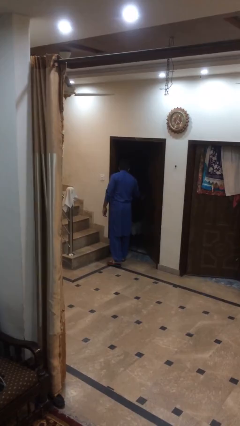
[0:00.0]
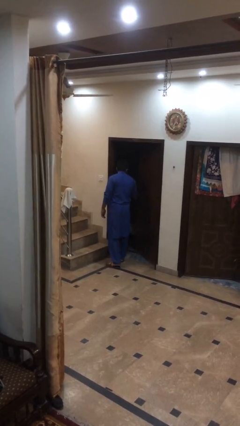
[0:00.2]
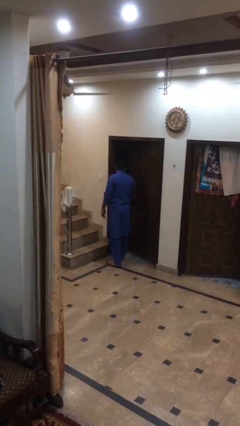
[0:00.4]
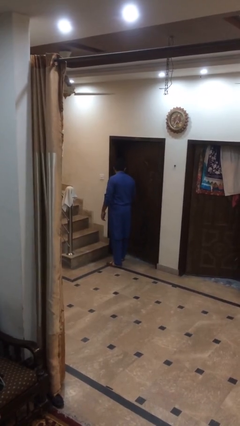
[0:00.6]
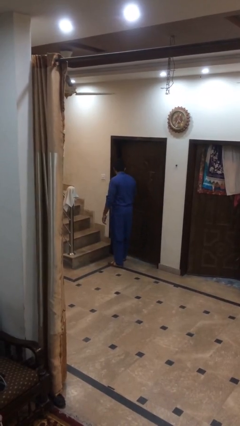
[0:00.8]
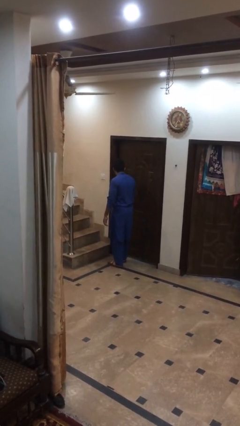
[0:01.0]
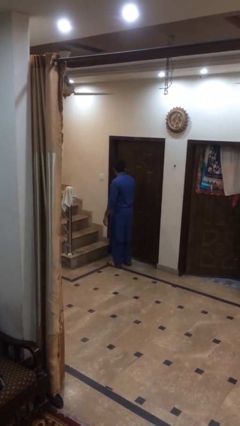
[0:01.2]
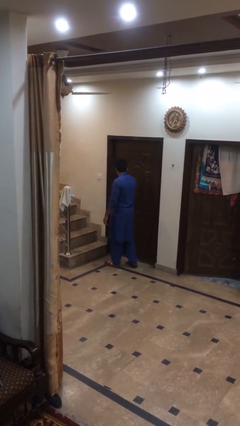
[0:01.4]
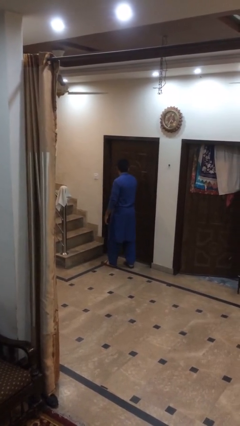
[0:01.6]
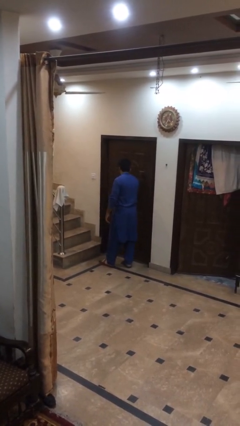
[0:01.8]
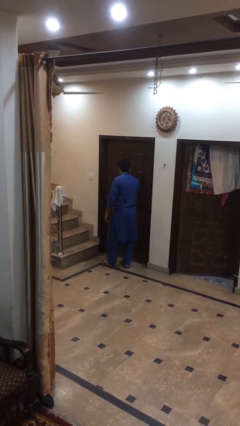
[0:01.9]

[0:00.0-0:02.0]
person closes facility door

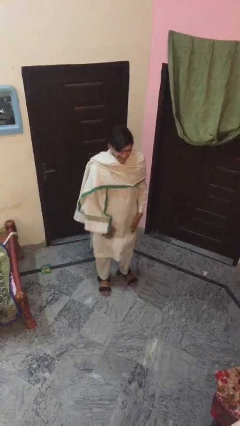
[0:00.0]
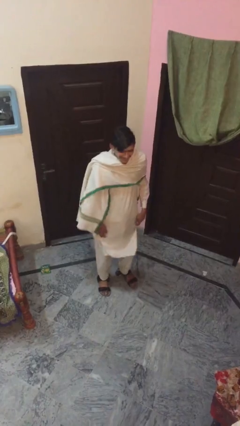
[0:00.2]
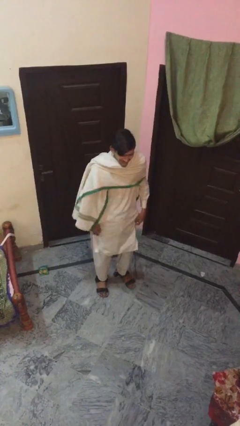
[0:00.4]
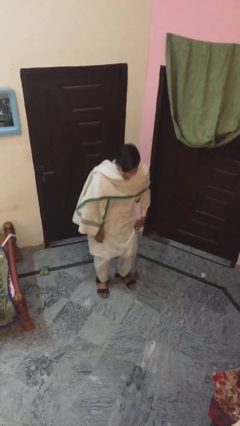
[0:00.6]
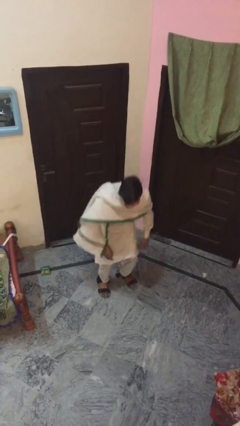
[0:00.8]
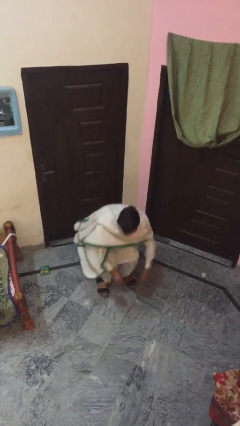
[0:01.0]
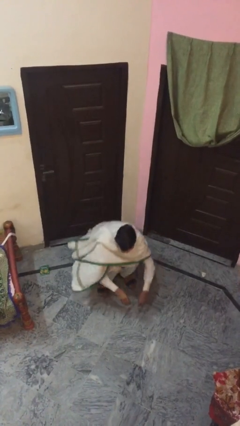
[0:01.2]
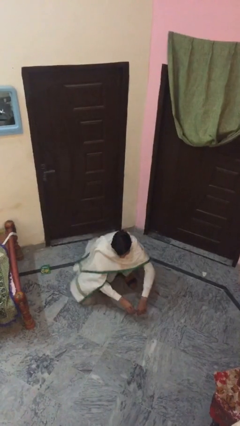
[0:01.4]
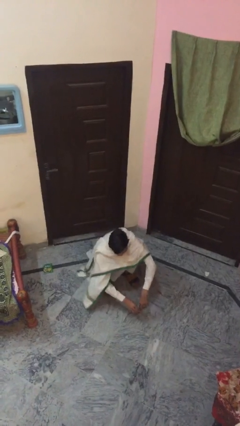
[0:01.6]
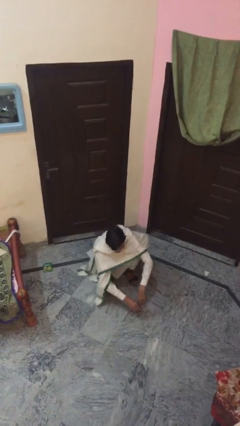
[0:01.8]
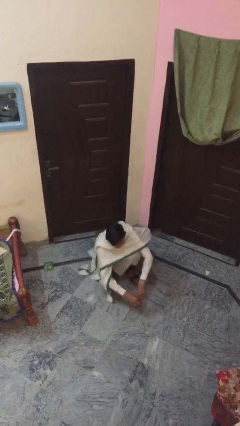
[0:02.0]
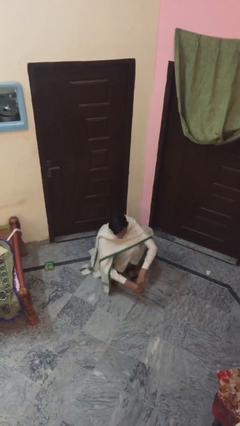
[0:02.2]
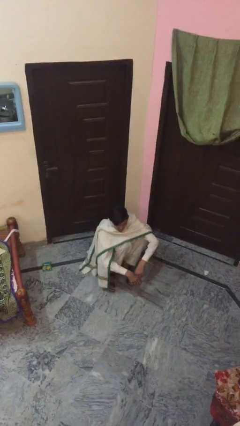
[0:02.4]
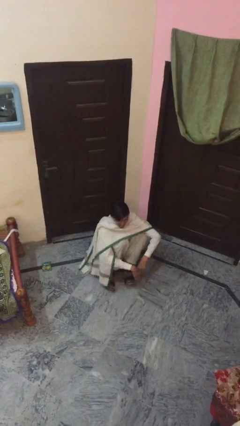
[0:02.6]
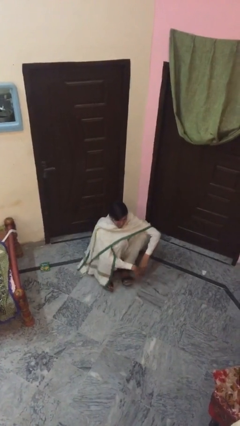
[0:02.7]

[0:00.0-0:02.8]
person sits down

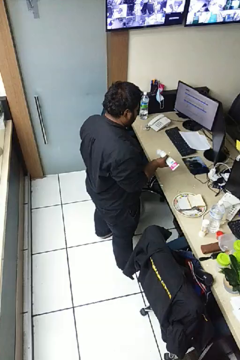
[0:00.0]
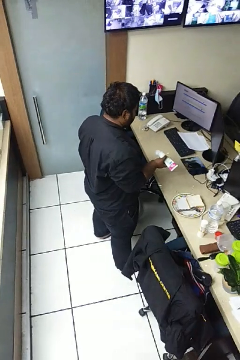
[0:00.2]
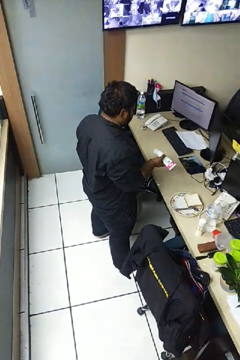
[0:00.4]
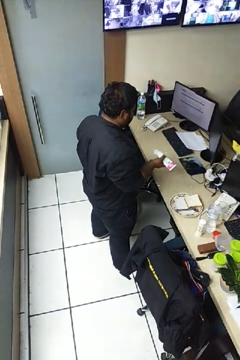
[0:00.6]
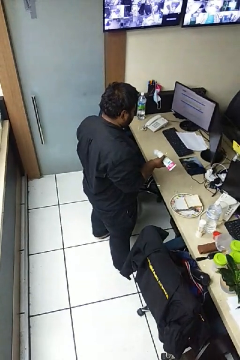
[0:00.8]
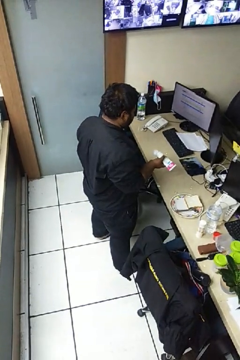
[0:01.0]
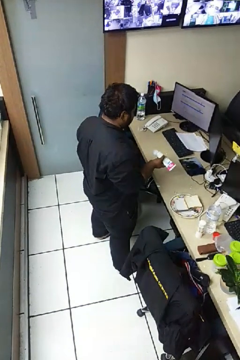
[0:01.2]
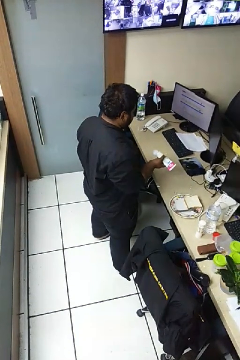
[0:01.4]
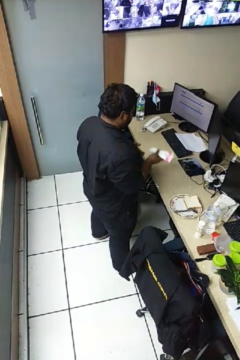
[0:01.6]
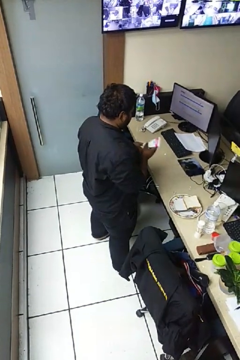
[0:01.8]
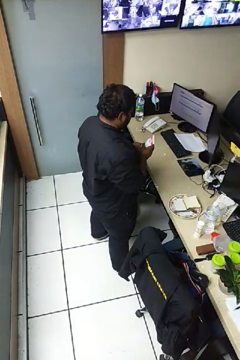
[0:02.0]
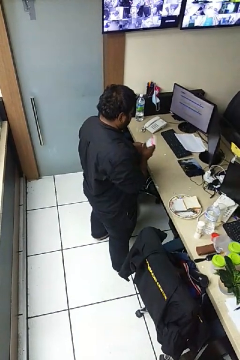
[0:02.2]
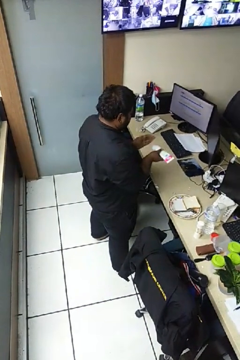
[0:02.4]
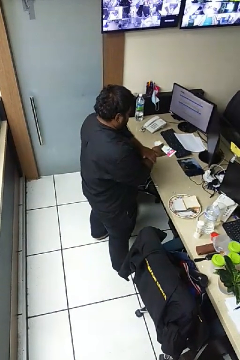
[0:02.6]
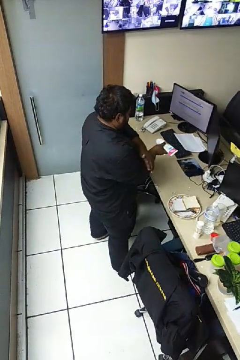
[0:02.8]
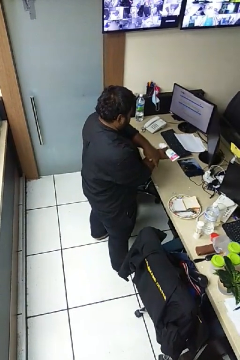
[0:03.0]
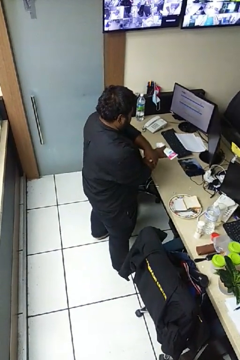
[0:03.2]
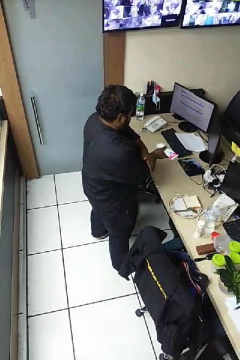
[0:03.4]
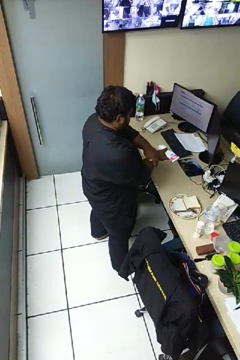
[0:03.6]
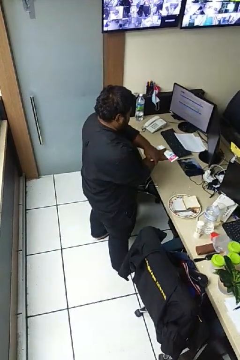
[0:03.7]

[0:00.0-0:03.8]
person applies sunscreen

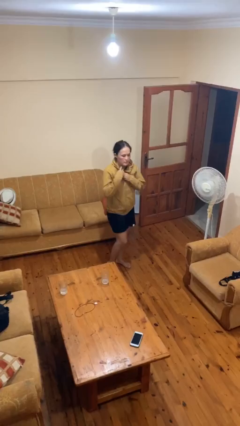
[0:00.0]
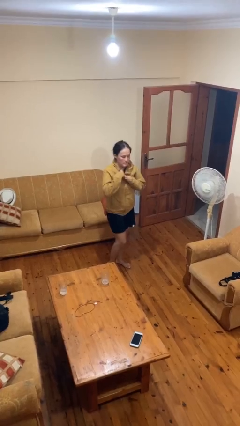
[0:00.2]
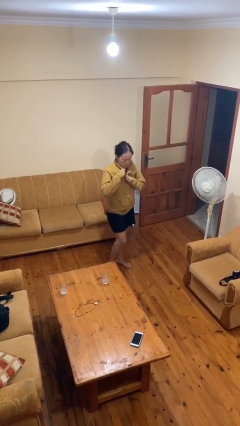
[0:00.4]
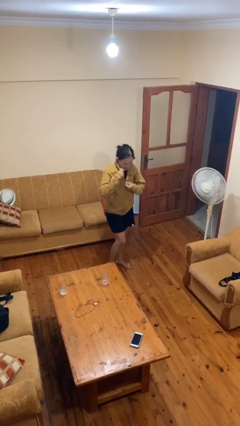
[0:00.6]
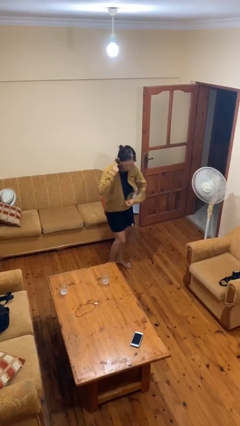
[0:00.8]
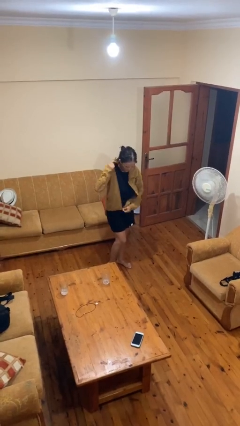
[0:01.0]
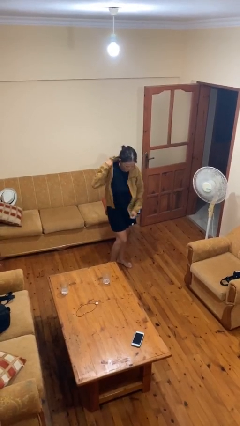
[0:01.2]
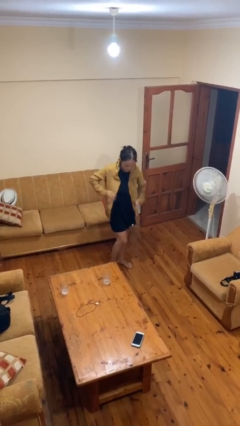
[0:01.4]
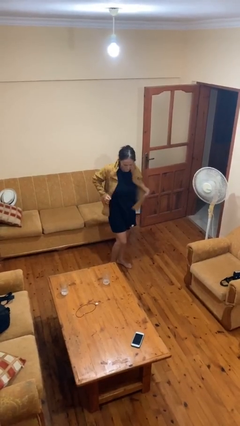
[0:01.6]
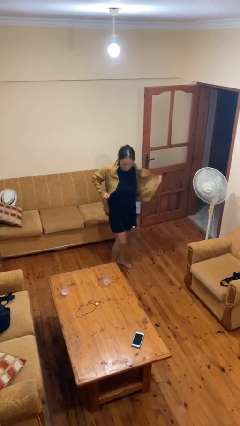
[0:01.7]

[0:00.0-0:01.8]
person unzips jacket

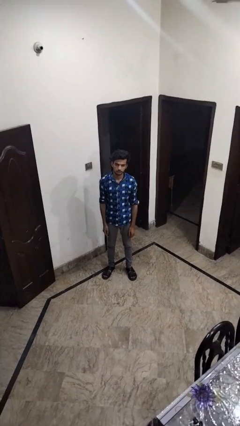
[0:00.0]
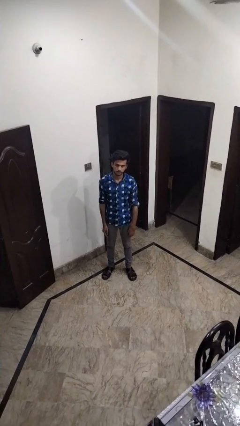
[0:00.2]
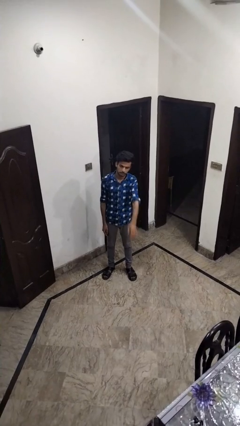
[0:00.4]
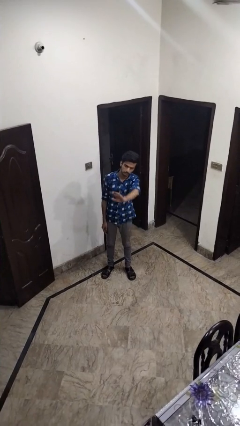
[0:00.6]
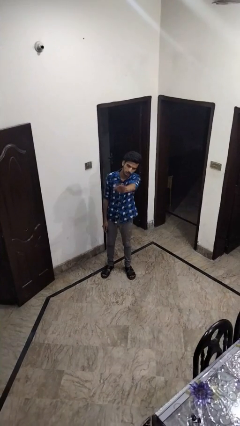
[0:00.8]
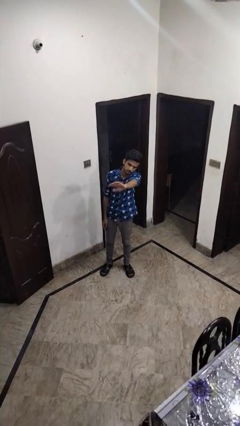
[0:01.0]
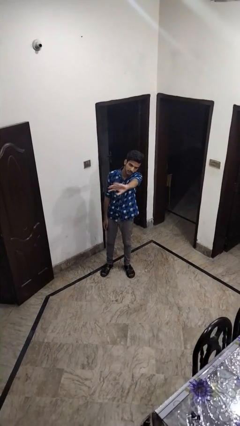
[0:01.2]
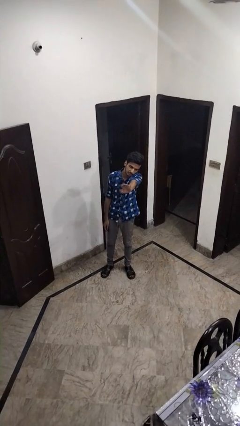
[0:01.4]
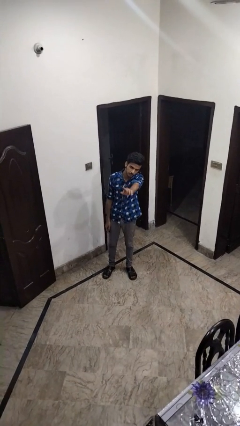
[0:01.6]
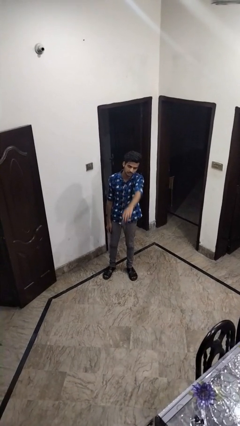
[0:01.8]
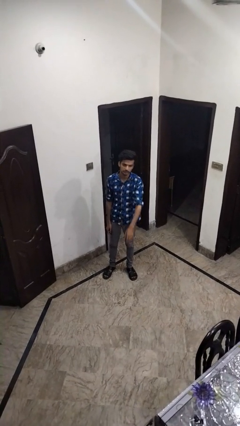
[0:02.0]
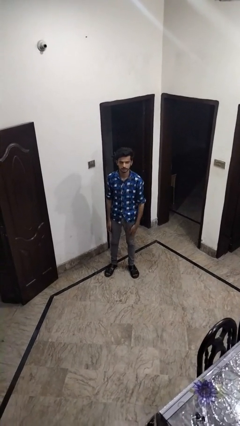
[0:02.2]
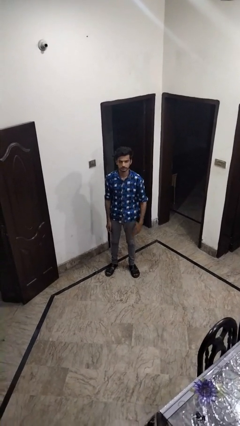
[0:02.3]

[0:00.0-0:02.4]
person waves at person

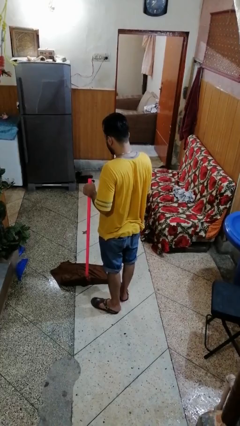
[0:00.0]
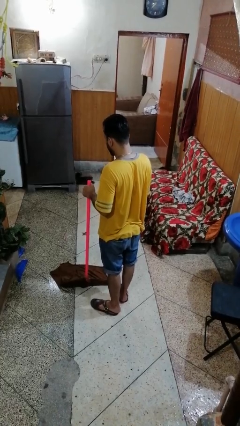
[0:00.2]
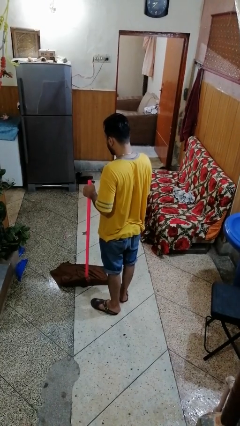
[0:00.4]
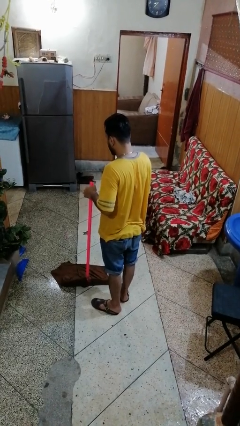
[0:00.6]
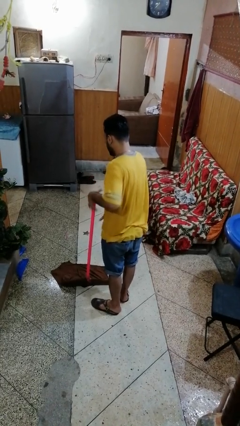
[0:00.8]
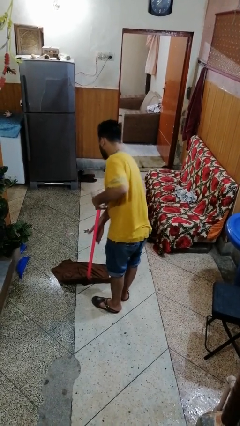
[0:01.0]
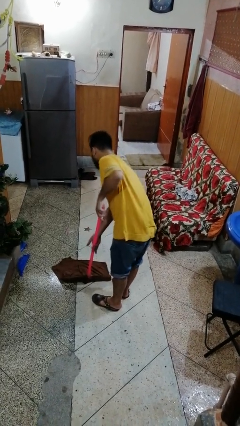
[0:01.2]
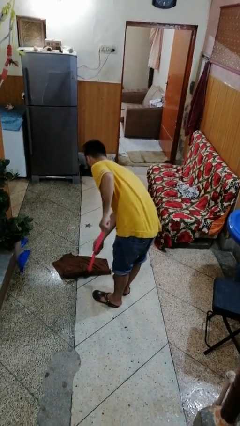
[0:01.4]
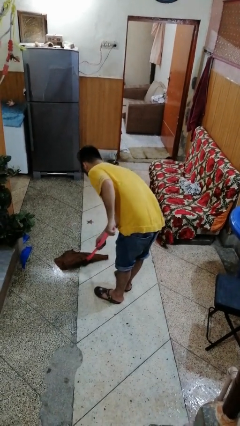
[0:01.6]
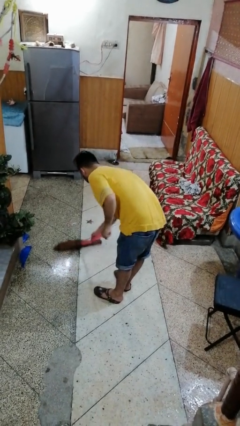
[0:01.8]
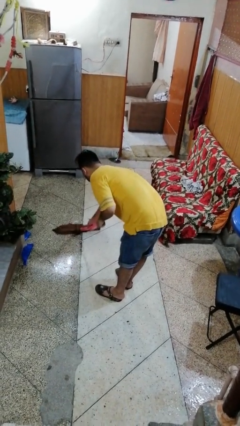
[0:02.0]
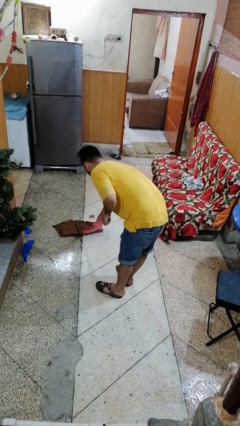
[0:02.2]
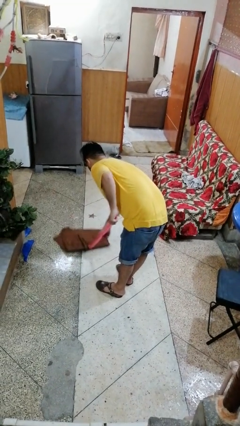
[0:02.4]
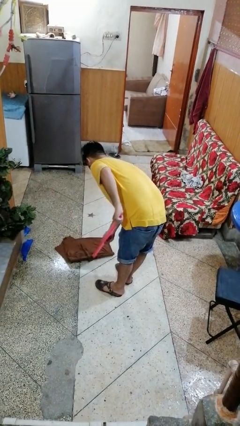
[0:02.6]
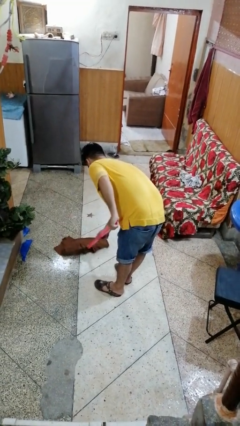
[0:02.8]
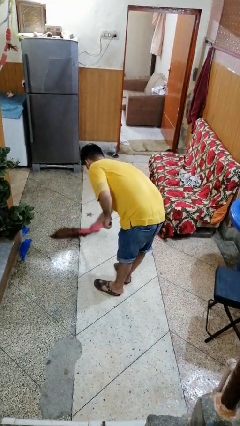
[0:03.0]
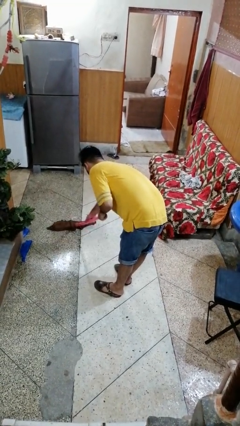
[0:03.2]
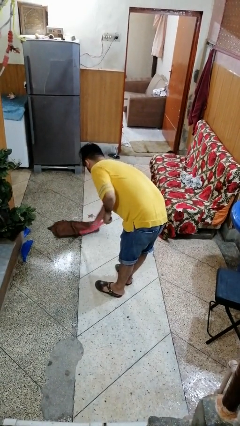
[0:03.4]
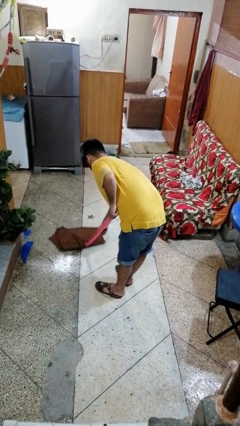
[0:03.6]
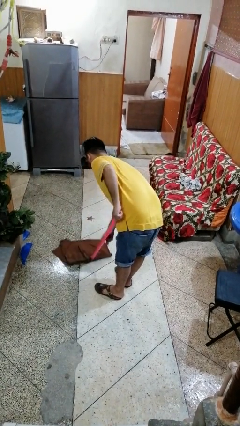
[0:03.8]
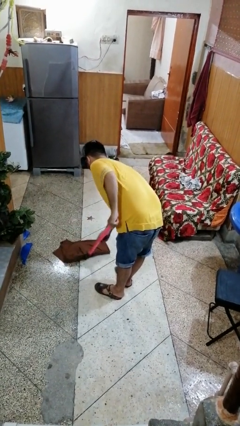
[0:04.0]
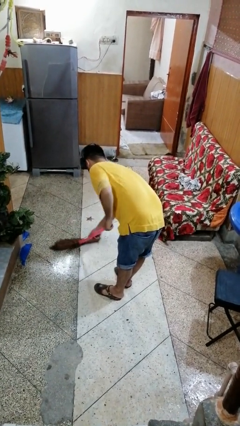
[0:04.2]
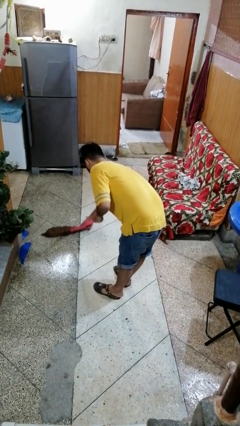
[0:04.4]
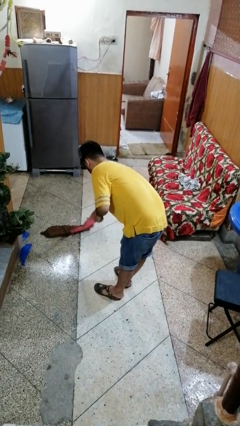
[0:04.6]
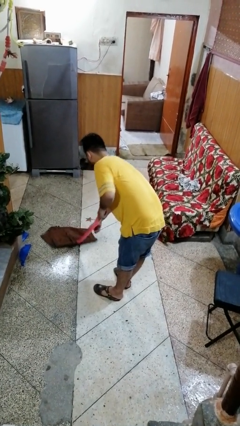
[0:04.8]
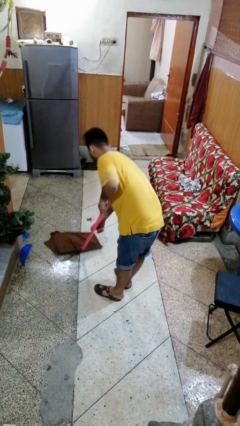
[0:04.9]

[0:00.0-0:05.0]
person mops

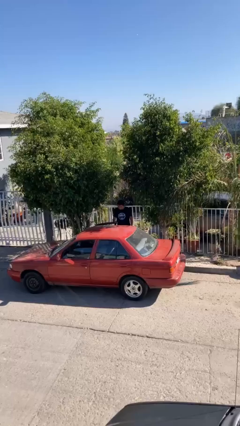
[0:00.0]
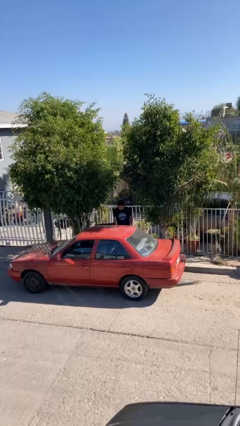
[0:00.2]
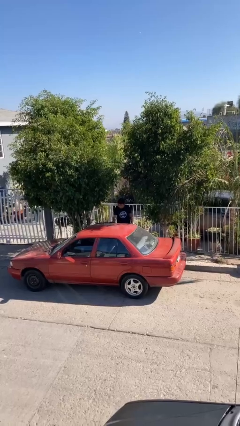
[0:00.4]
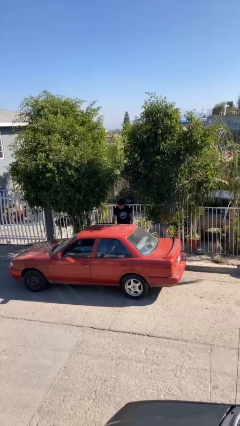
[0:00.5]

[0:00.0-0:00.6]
person closes car door
